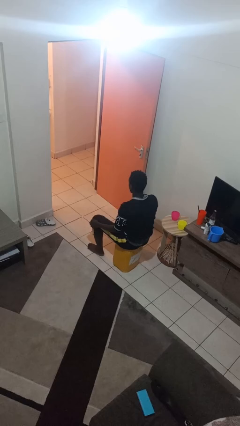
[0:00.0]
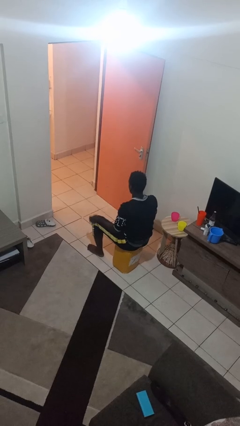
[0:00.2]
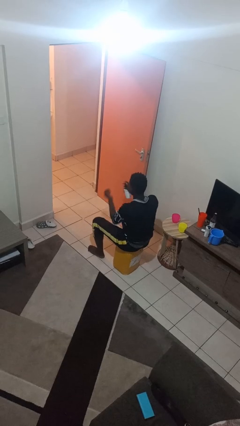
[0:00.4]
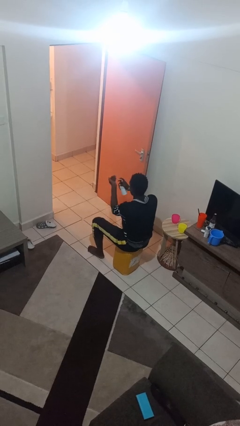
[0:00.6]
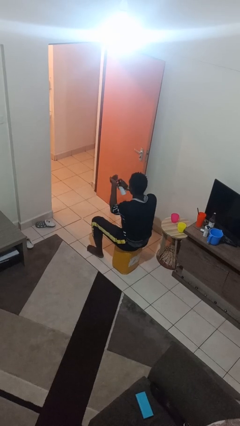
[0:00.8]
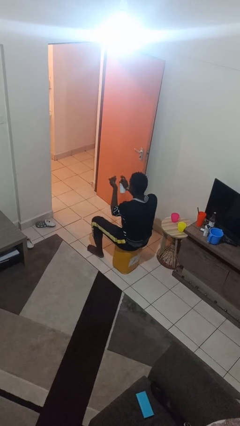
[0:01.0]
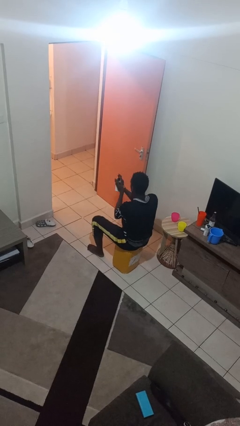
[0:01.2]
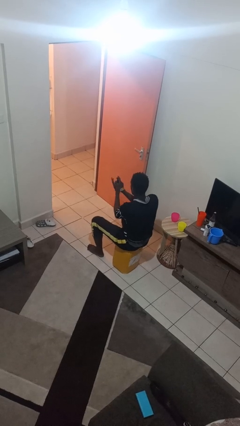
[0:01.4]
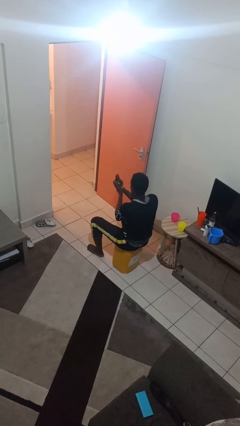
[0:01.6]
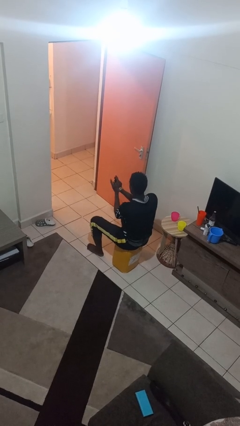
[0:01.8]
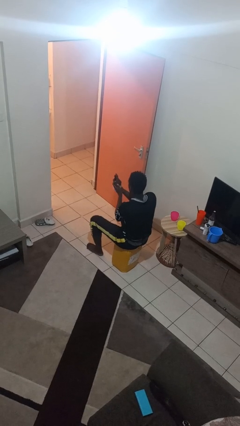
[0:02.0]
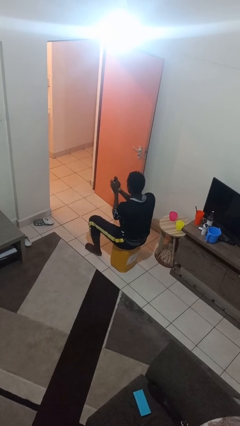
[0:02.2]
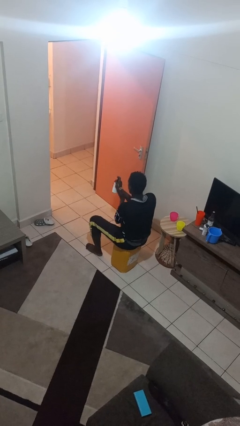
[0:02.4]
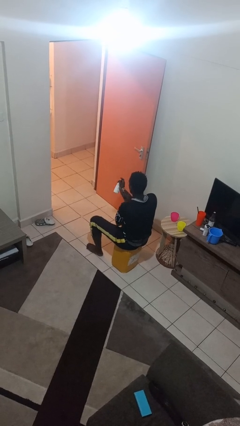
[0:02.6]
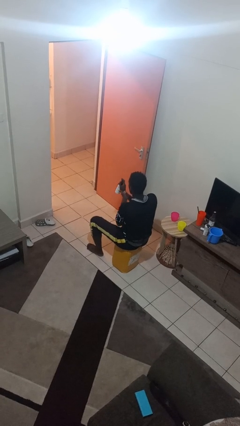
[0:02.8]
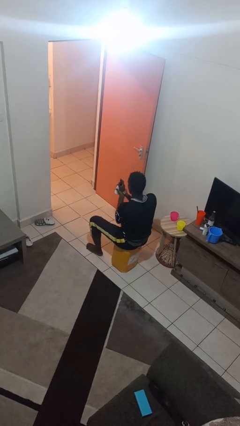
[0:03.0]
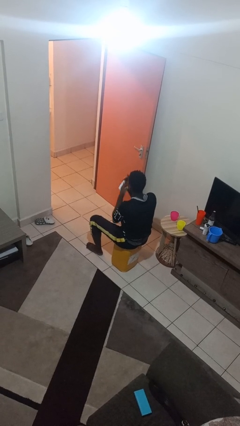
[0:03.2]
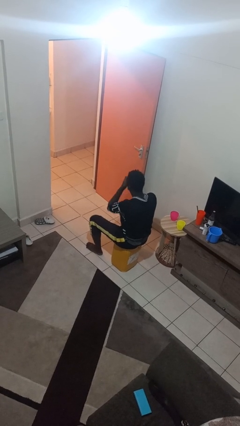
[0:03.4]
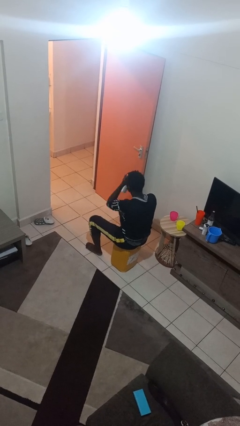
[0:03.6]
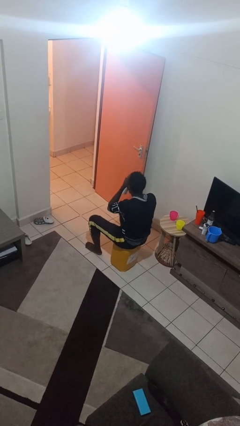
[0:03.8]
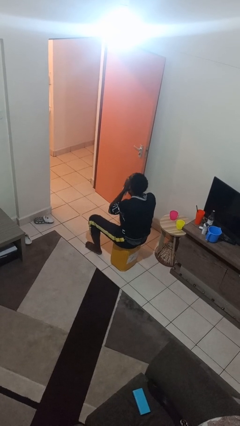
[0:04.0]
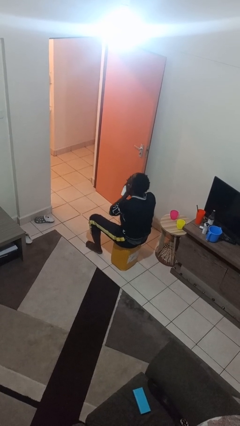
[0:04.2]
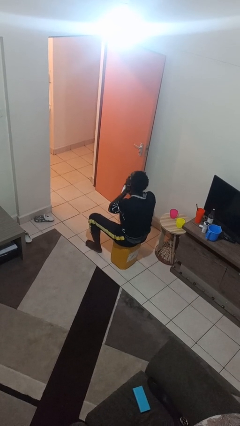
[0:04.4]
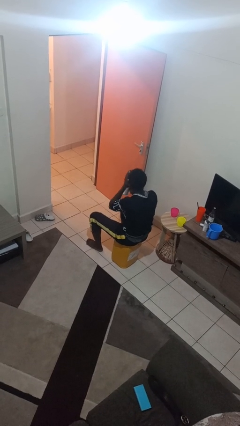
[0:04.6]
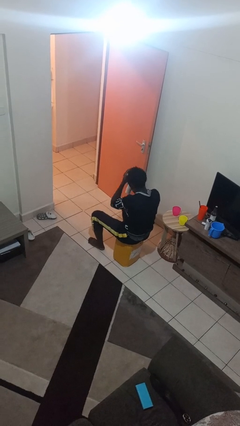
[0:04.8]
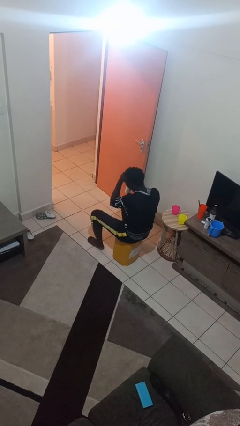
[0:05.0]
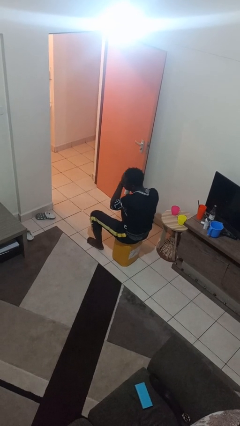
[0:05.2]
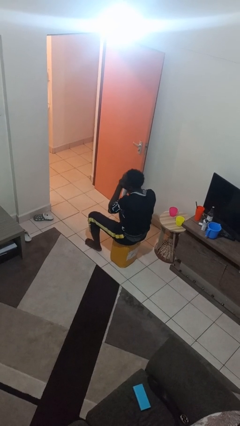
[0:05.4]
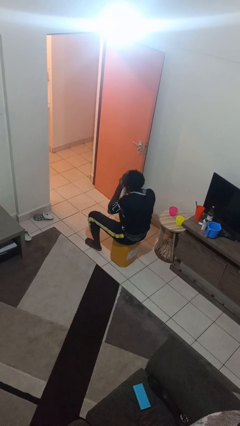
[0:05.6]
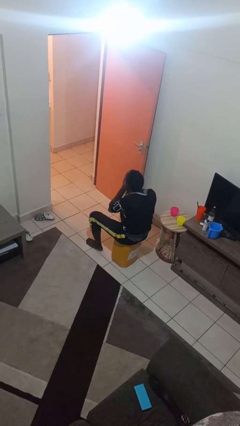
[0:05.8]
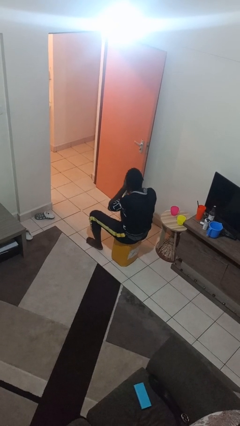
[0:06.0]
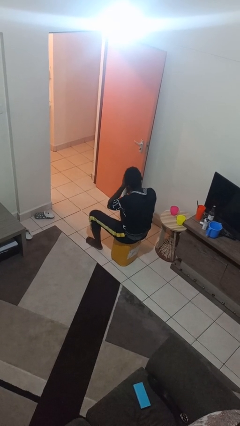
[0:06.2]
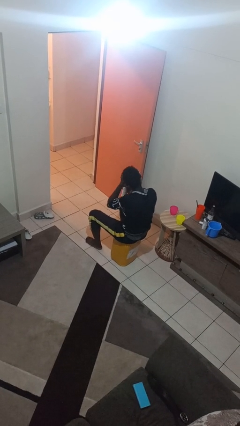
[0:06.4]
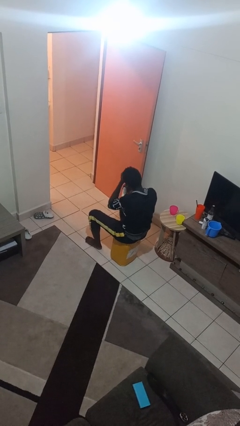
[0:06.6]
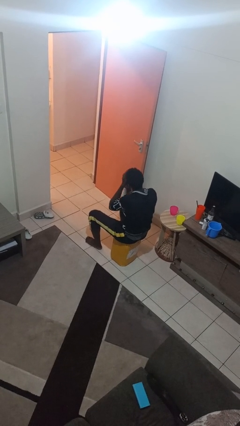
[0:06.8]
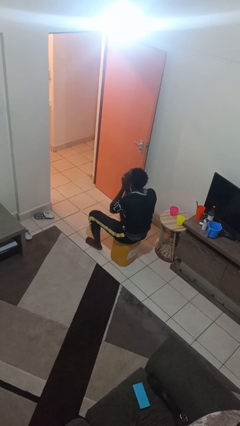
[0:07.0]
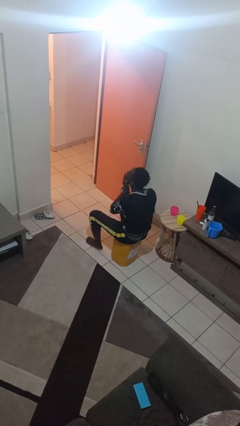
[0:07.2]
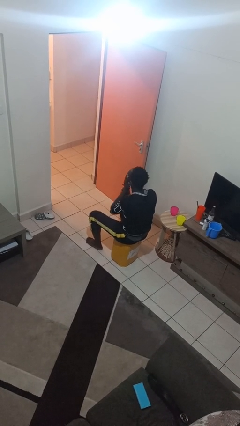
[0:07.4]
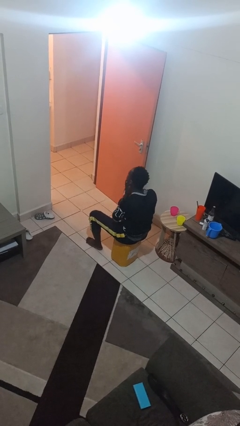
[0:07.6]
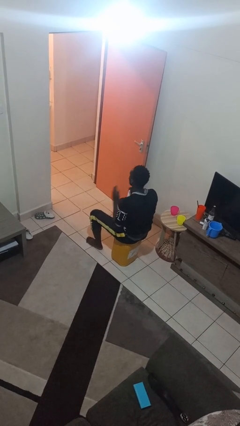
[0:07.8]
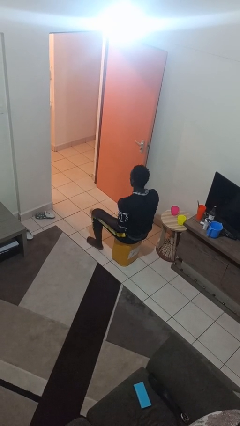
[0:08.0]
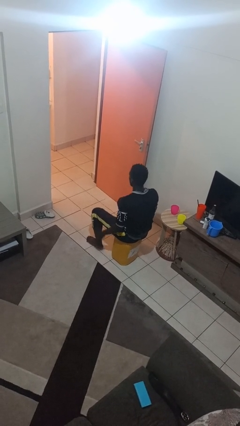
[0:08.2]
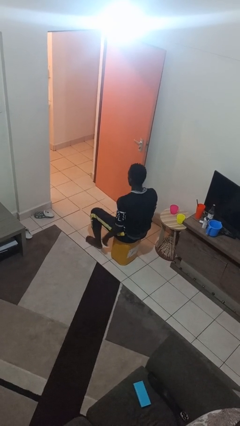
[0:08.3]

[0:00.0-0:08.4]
person applies sunscreen

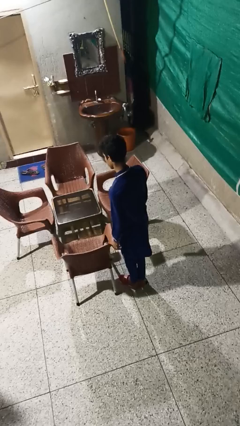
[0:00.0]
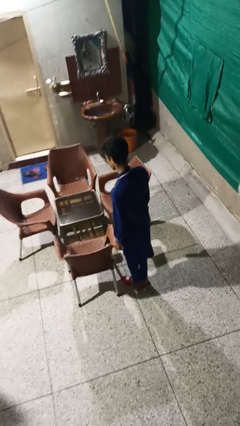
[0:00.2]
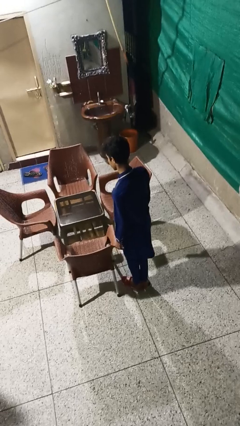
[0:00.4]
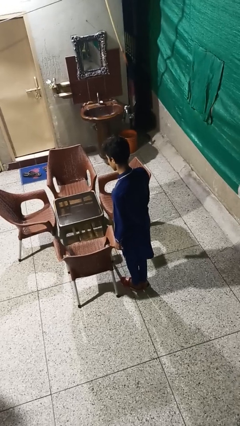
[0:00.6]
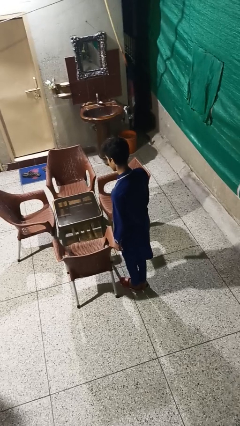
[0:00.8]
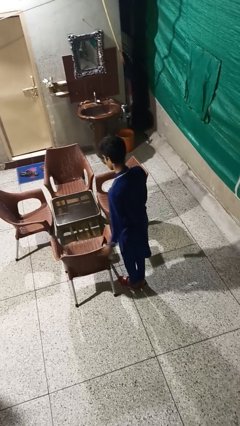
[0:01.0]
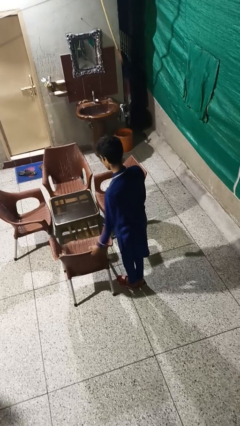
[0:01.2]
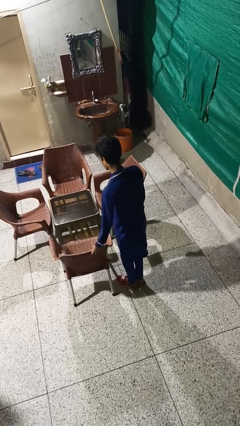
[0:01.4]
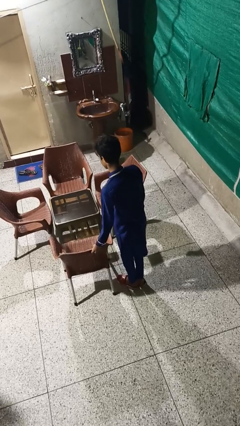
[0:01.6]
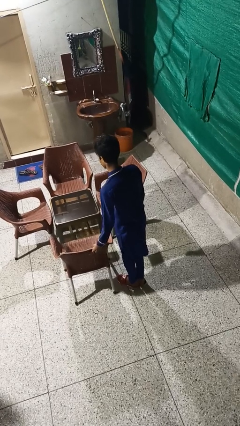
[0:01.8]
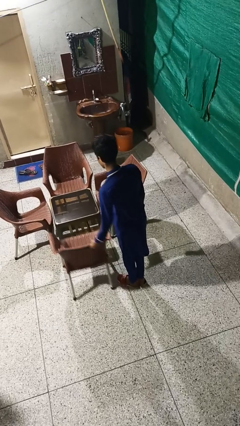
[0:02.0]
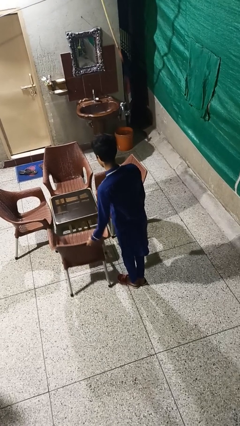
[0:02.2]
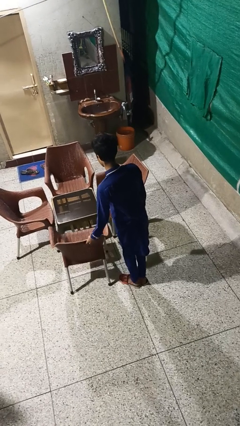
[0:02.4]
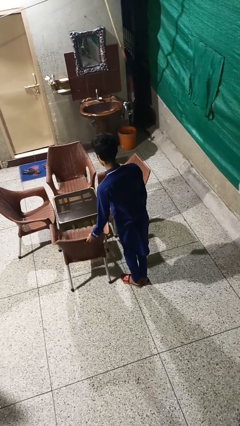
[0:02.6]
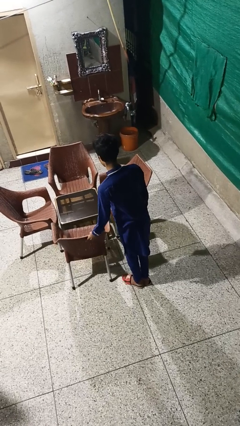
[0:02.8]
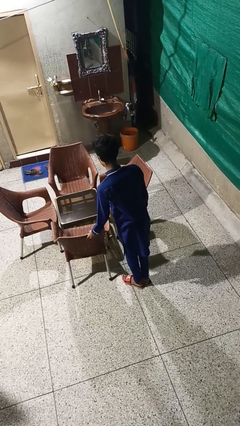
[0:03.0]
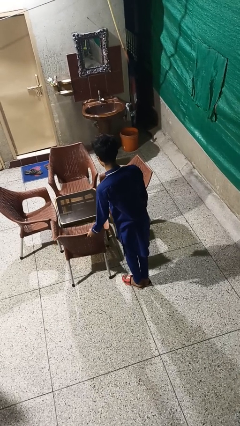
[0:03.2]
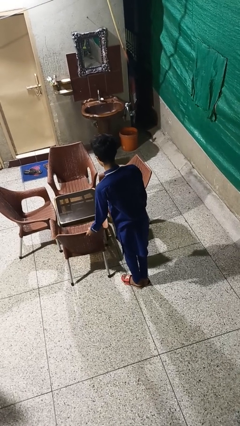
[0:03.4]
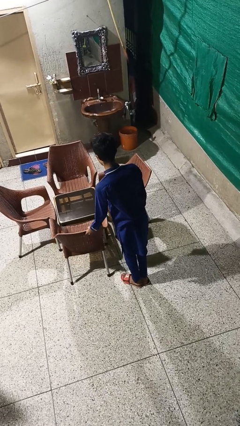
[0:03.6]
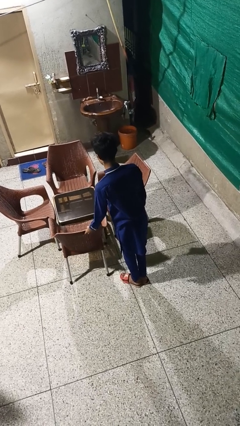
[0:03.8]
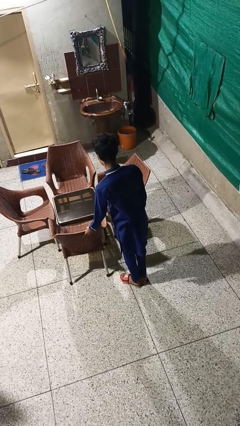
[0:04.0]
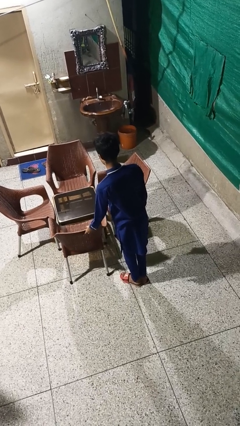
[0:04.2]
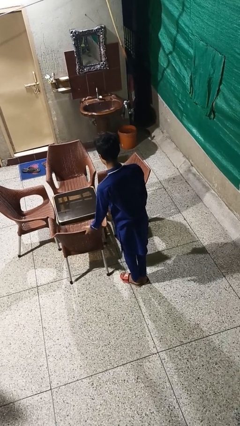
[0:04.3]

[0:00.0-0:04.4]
person pushes in chair

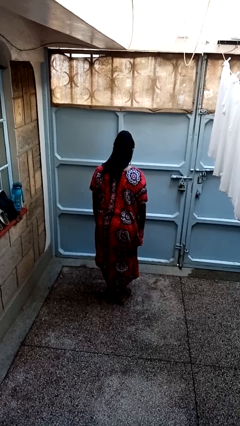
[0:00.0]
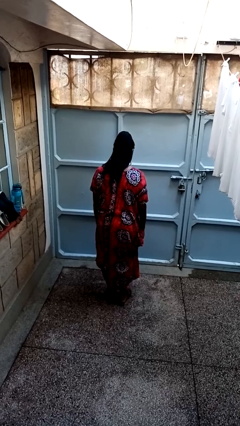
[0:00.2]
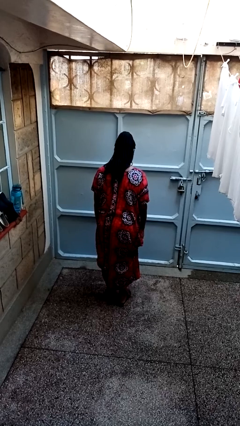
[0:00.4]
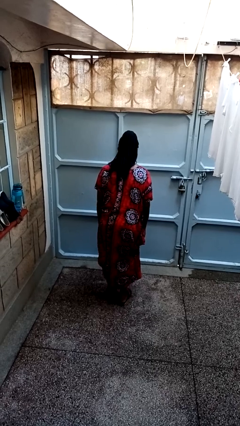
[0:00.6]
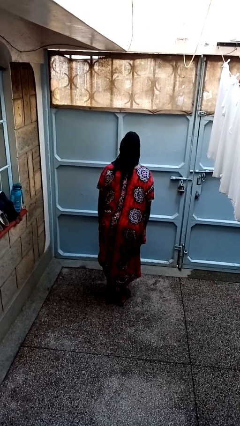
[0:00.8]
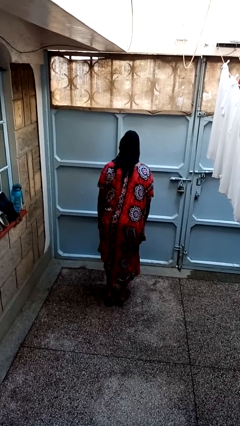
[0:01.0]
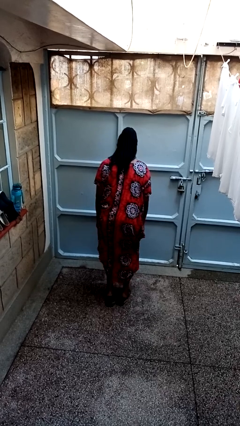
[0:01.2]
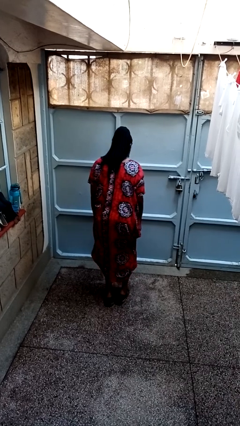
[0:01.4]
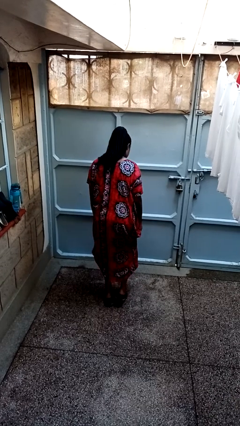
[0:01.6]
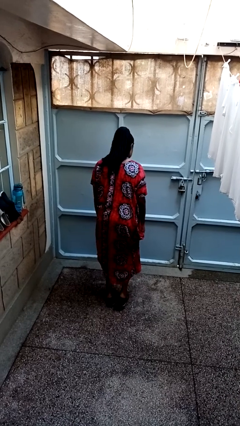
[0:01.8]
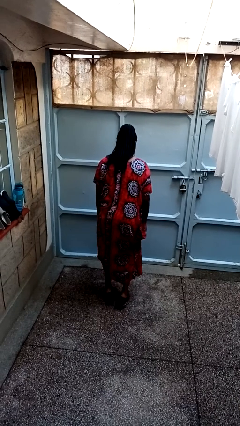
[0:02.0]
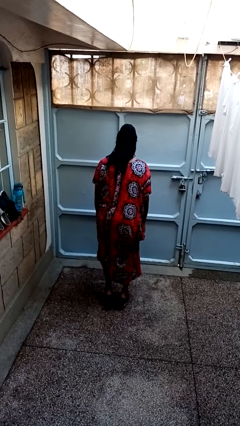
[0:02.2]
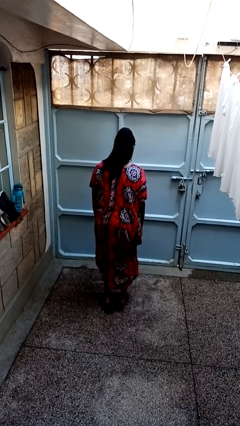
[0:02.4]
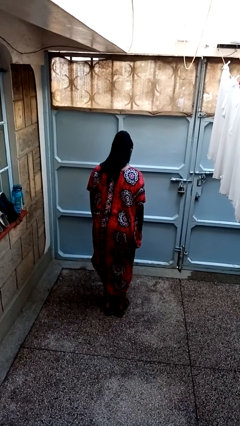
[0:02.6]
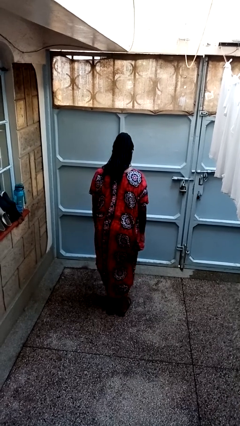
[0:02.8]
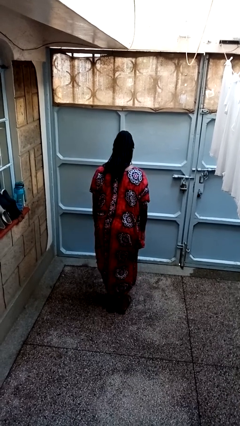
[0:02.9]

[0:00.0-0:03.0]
person walks tiptoe

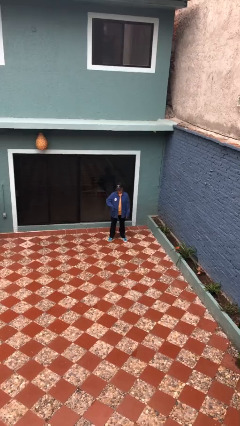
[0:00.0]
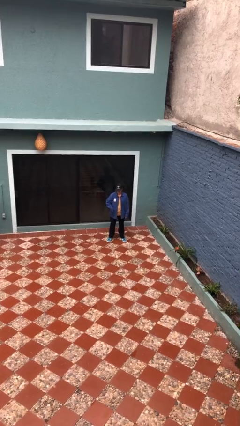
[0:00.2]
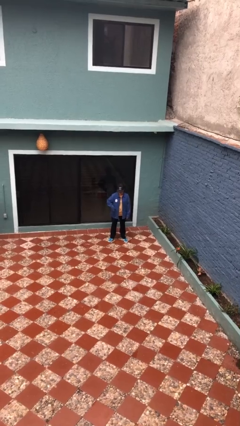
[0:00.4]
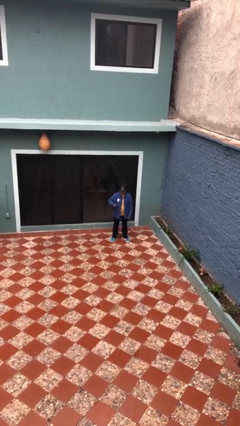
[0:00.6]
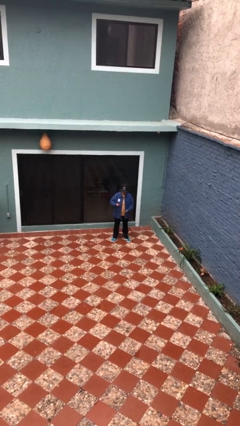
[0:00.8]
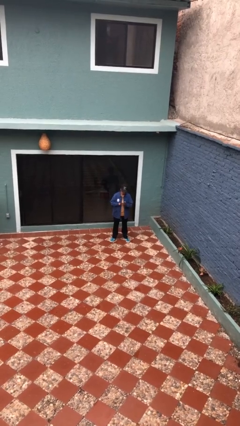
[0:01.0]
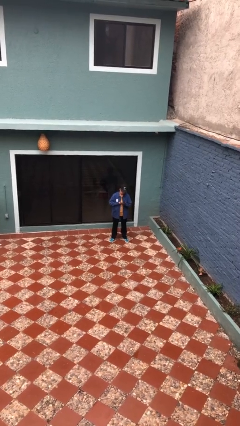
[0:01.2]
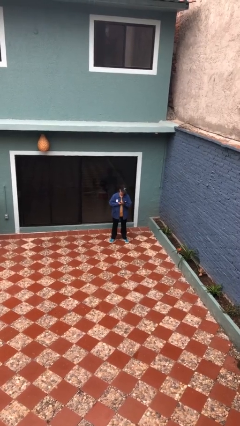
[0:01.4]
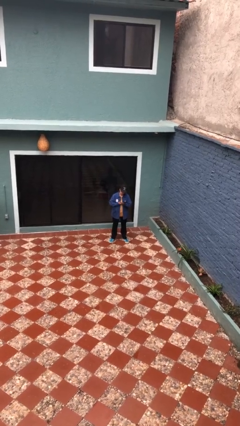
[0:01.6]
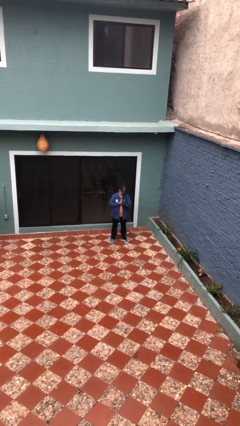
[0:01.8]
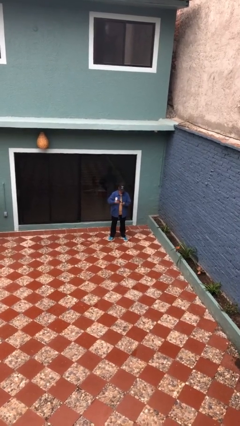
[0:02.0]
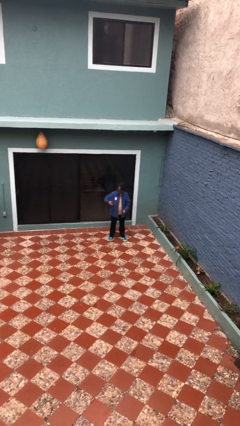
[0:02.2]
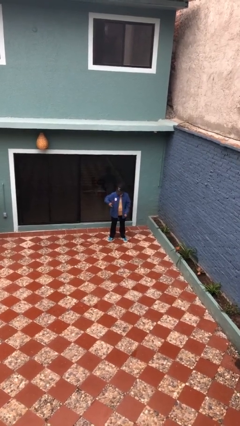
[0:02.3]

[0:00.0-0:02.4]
person takes phone from pocket
